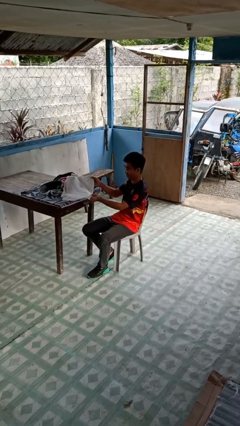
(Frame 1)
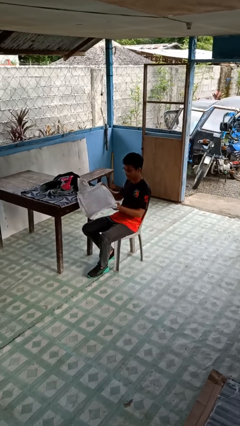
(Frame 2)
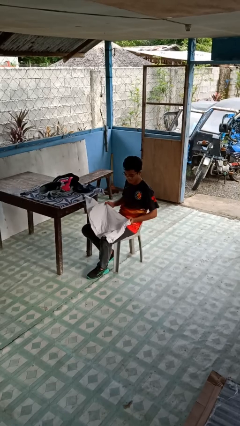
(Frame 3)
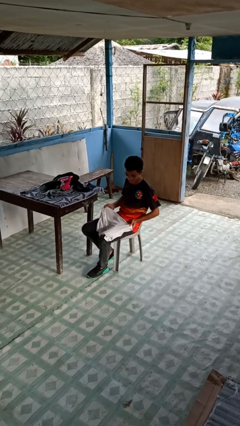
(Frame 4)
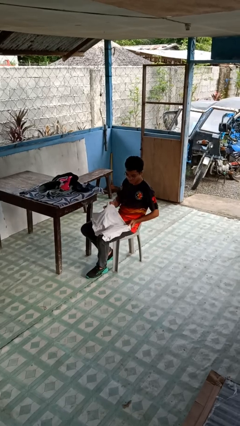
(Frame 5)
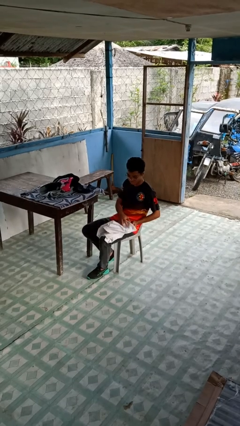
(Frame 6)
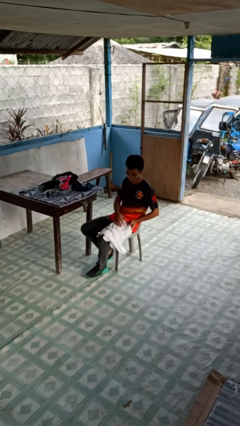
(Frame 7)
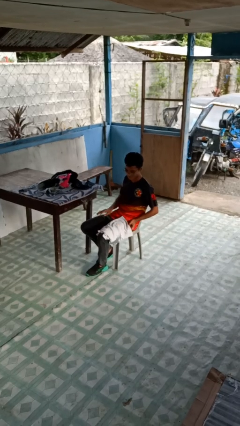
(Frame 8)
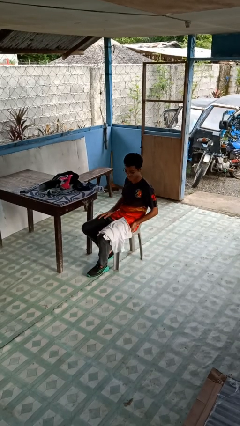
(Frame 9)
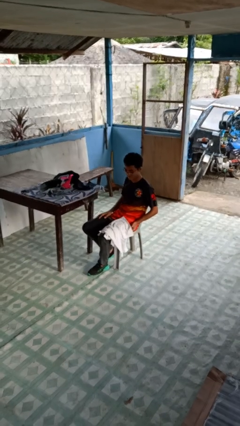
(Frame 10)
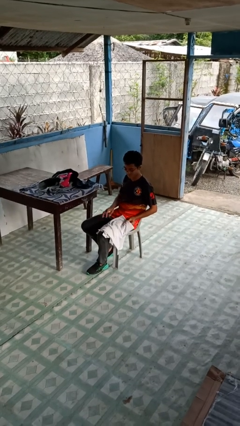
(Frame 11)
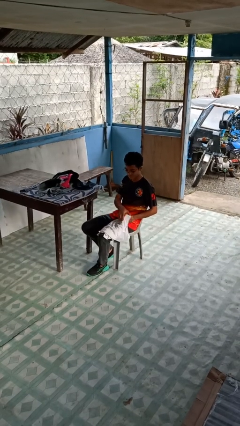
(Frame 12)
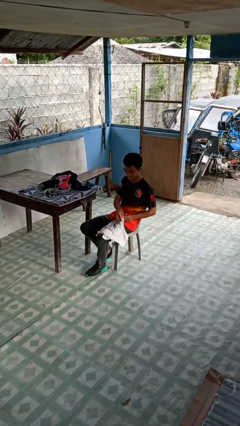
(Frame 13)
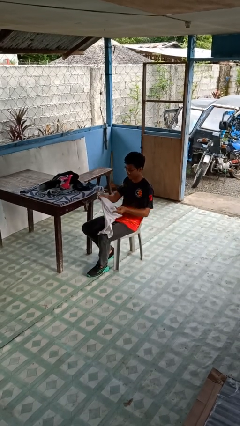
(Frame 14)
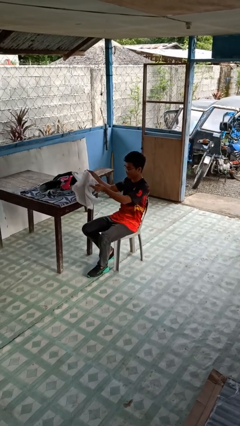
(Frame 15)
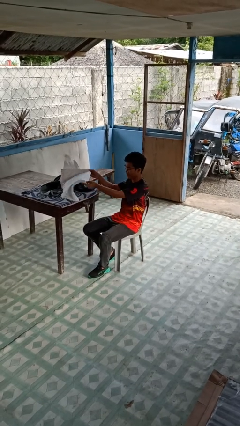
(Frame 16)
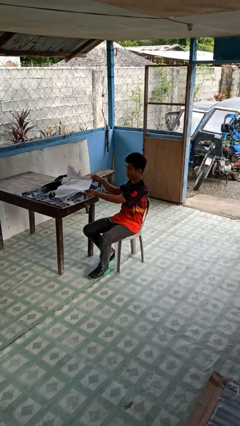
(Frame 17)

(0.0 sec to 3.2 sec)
person folds shirt

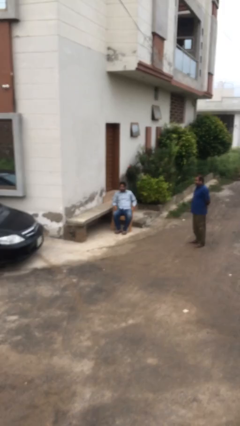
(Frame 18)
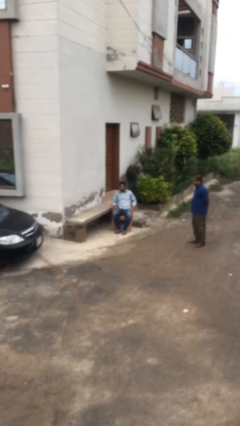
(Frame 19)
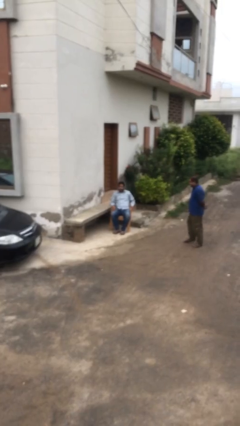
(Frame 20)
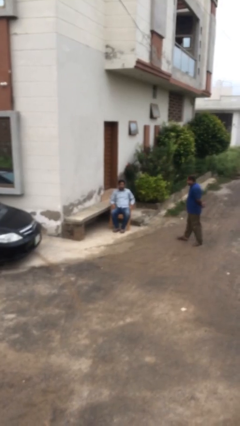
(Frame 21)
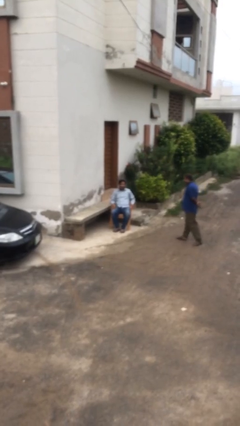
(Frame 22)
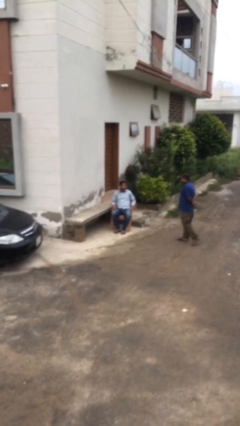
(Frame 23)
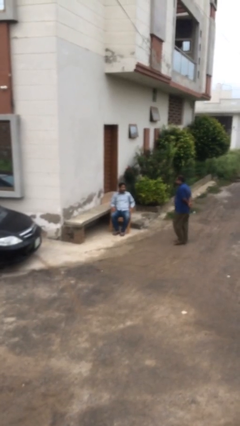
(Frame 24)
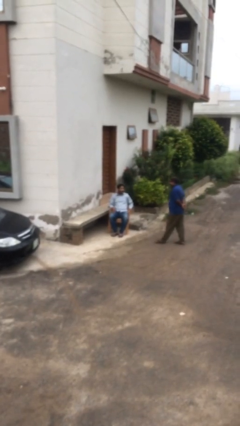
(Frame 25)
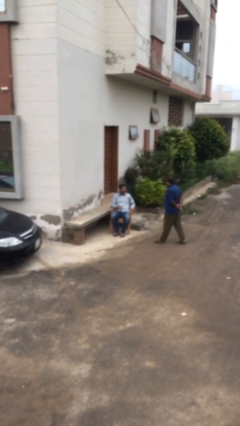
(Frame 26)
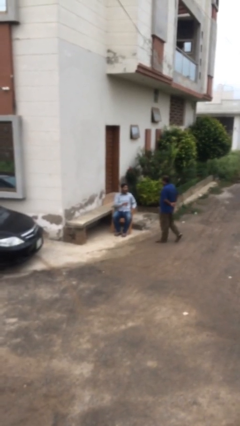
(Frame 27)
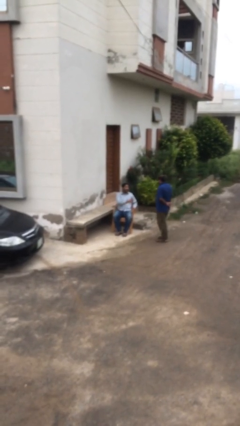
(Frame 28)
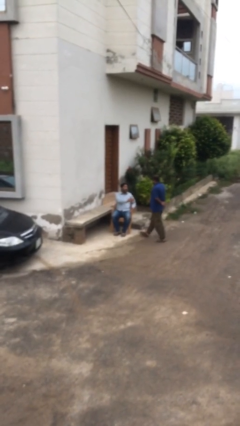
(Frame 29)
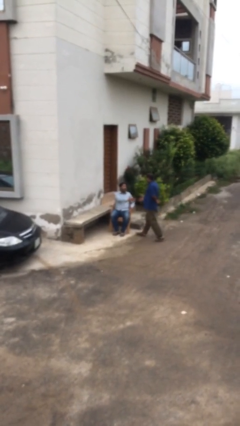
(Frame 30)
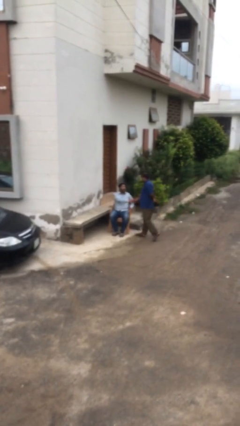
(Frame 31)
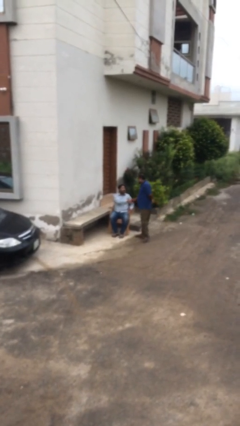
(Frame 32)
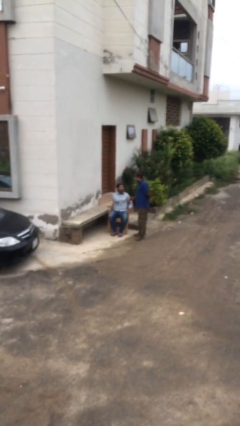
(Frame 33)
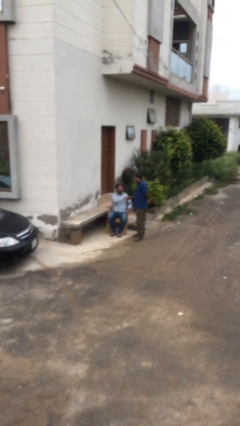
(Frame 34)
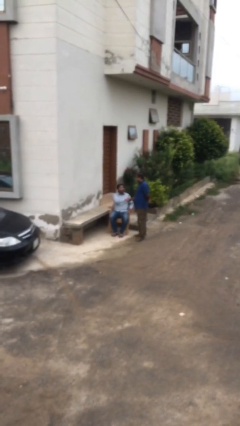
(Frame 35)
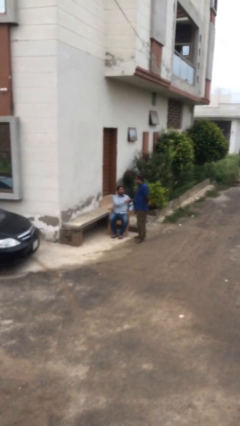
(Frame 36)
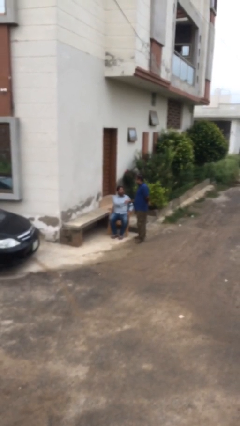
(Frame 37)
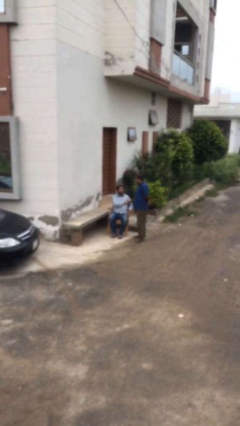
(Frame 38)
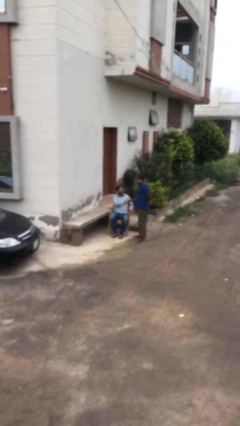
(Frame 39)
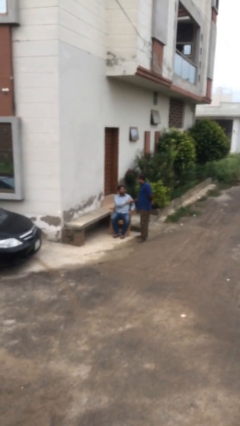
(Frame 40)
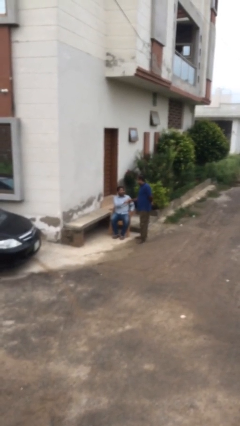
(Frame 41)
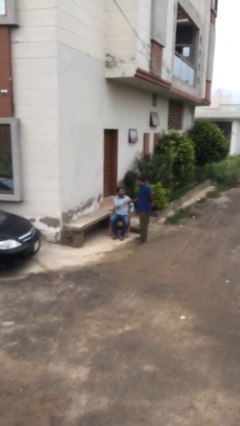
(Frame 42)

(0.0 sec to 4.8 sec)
person shakes hand

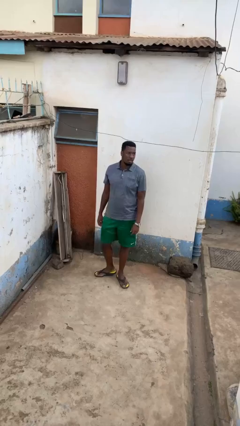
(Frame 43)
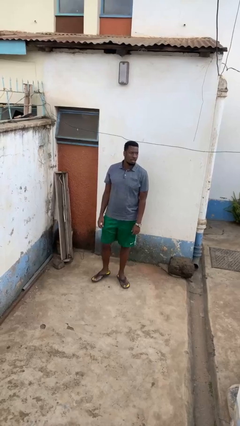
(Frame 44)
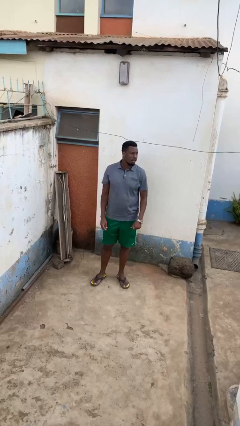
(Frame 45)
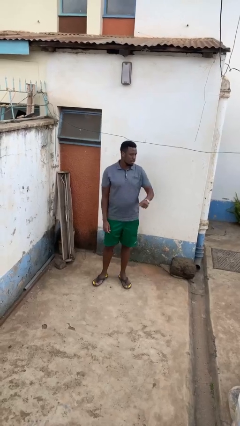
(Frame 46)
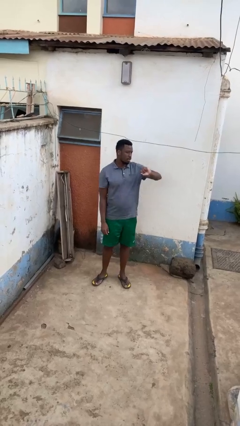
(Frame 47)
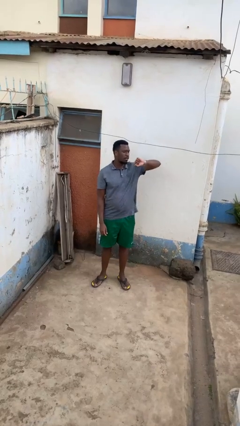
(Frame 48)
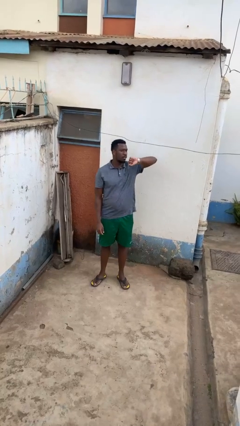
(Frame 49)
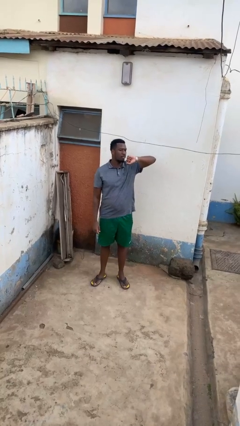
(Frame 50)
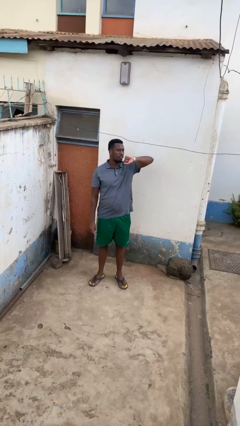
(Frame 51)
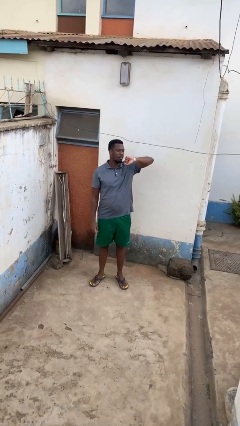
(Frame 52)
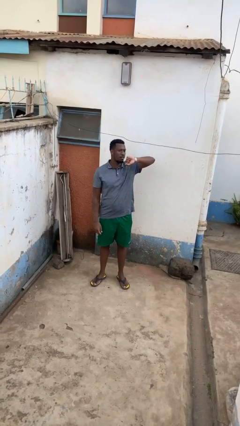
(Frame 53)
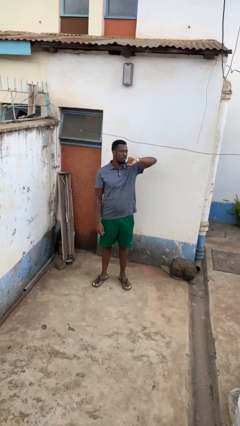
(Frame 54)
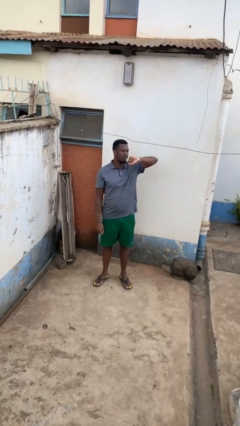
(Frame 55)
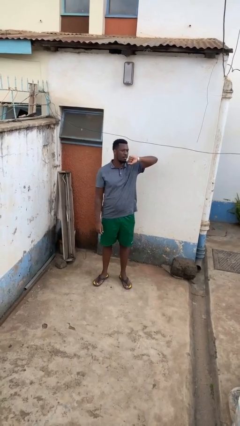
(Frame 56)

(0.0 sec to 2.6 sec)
person looks at wristwatch

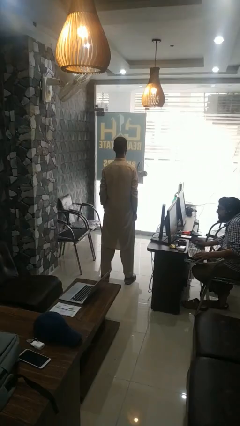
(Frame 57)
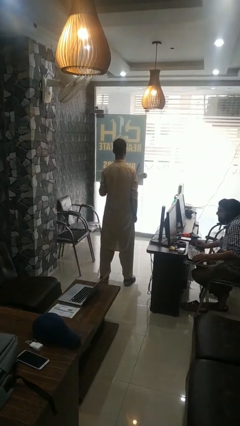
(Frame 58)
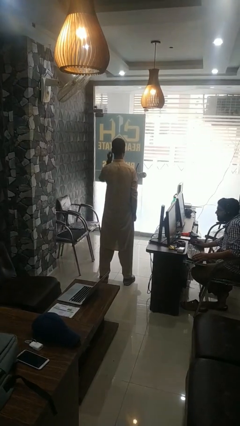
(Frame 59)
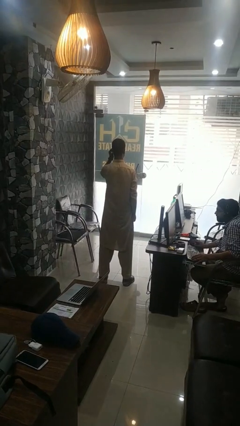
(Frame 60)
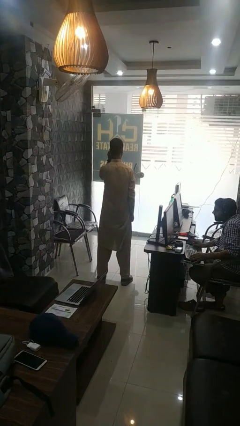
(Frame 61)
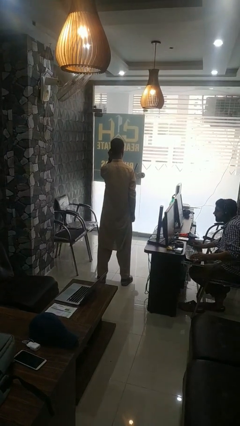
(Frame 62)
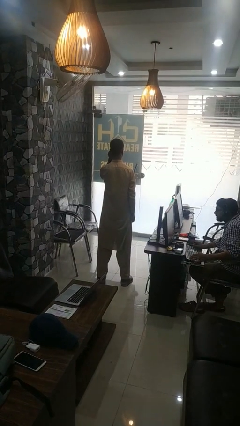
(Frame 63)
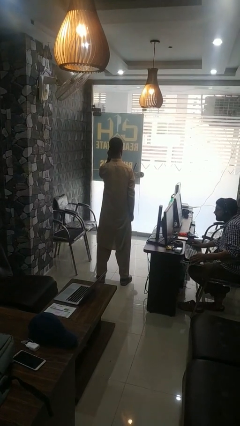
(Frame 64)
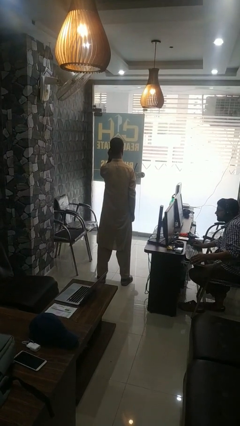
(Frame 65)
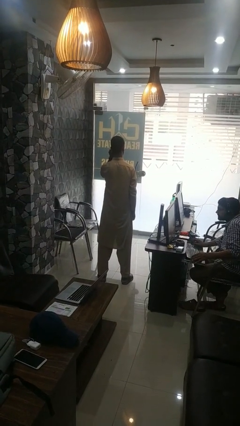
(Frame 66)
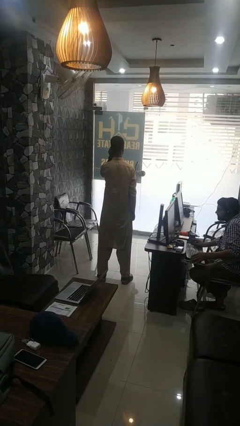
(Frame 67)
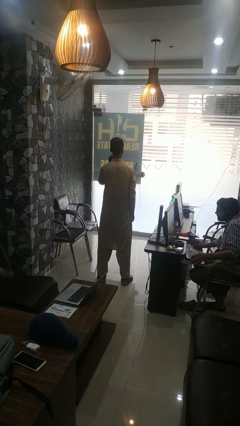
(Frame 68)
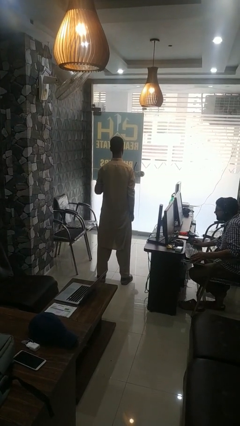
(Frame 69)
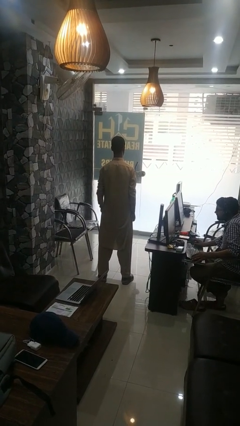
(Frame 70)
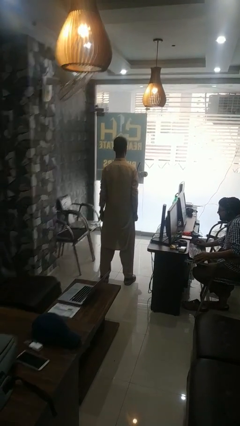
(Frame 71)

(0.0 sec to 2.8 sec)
person touches earlobe

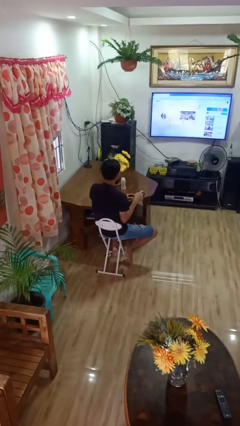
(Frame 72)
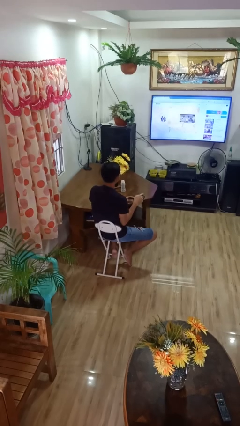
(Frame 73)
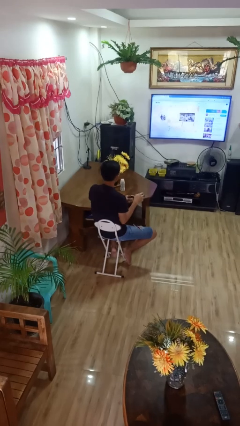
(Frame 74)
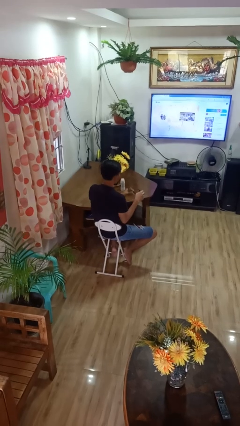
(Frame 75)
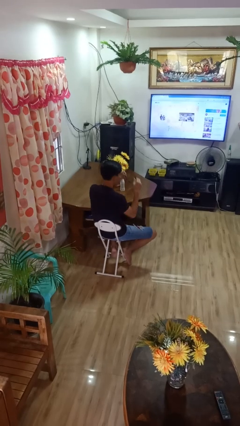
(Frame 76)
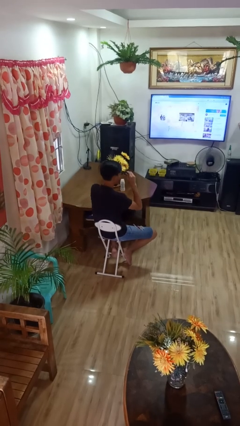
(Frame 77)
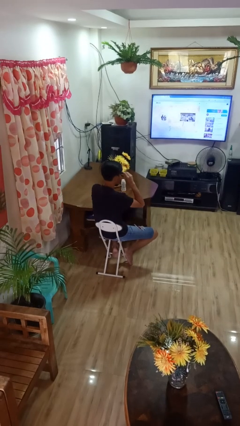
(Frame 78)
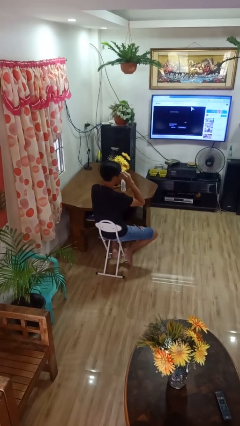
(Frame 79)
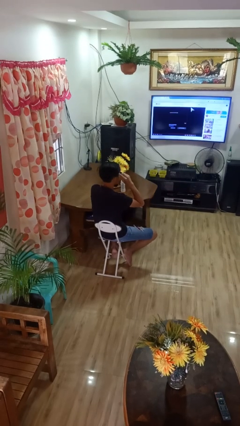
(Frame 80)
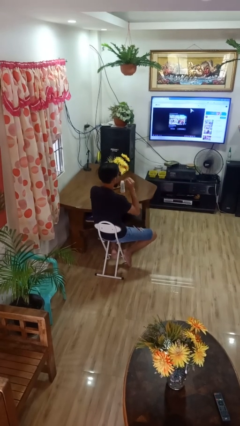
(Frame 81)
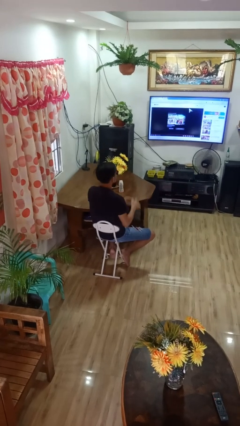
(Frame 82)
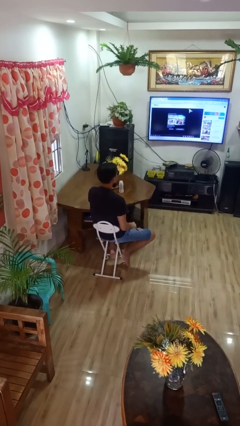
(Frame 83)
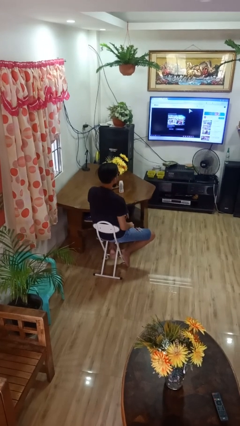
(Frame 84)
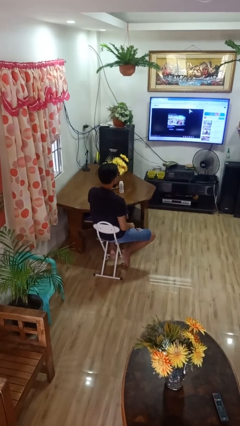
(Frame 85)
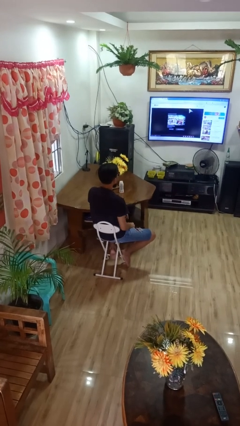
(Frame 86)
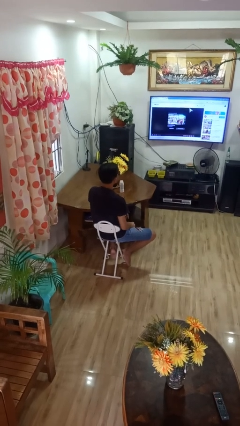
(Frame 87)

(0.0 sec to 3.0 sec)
person puts on sunglasses

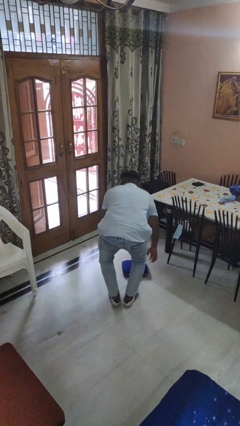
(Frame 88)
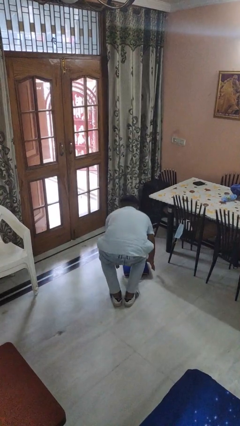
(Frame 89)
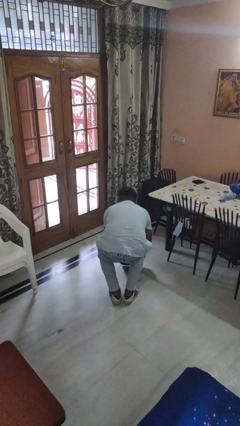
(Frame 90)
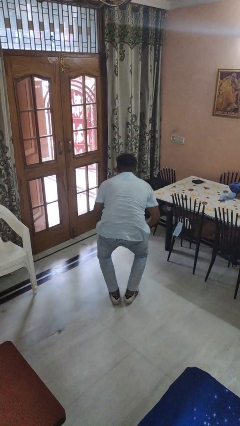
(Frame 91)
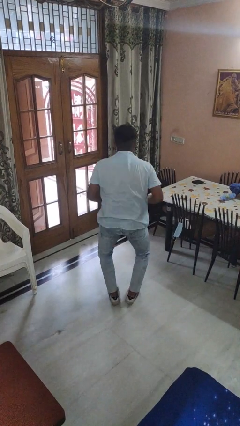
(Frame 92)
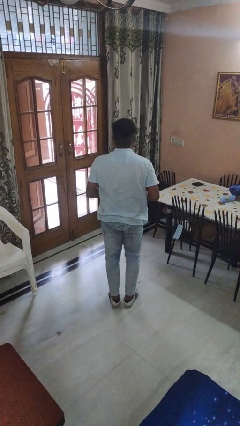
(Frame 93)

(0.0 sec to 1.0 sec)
person picks up object from floor

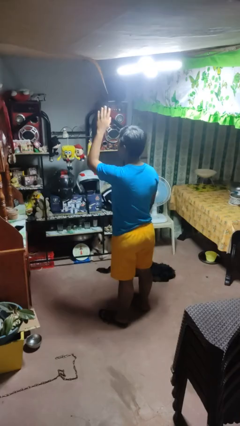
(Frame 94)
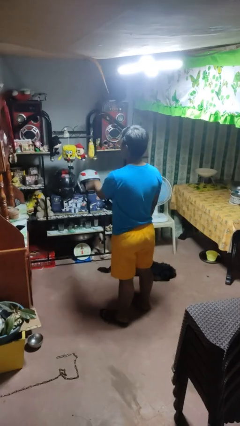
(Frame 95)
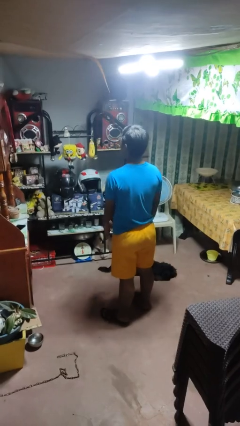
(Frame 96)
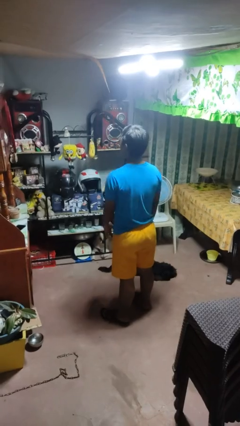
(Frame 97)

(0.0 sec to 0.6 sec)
person gestures swipe down
